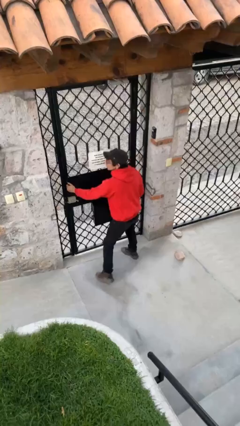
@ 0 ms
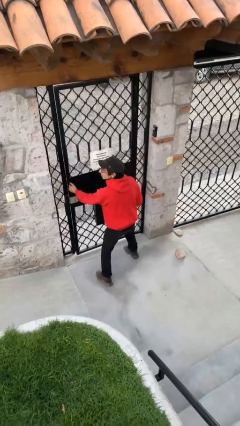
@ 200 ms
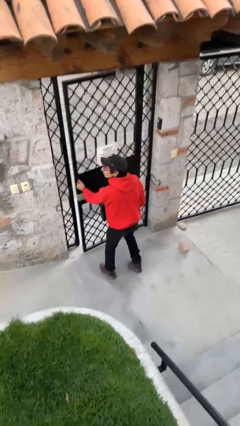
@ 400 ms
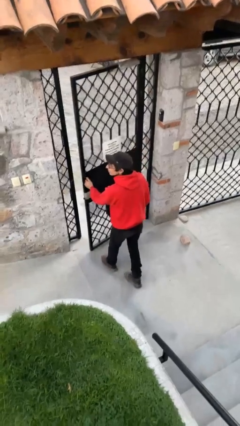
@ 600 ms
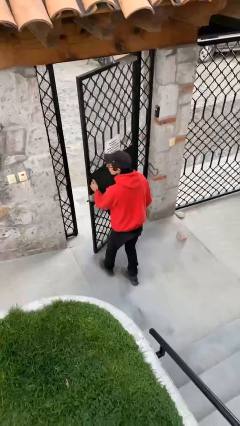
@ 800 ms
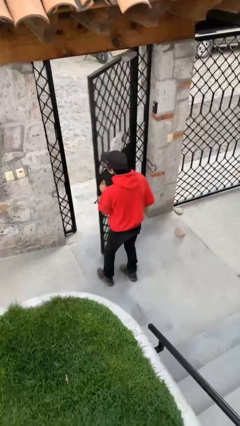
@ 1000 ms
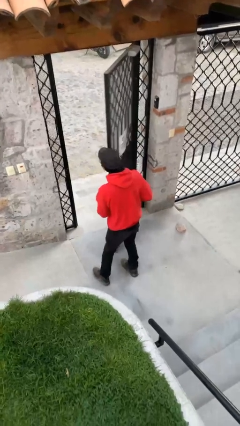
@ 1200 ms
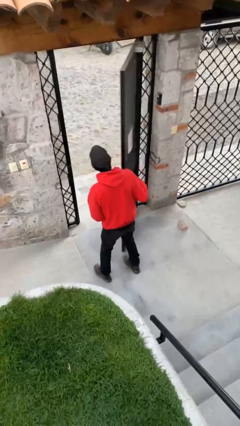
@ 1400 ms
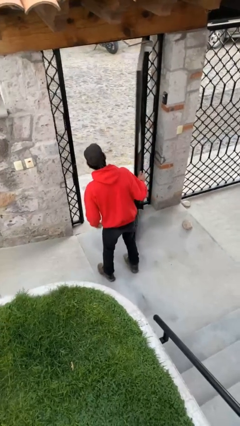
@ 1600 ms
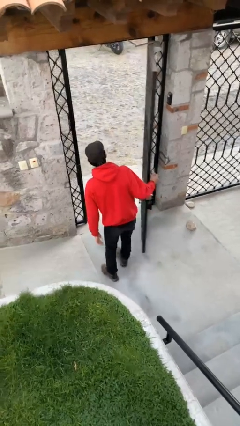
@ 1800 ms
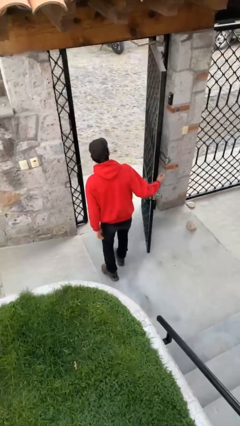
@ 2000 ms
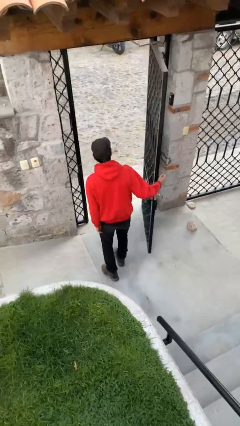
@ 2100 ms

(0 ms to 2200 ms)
person opens facility door

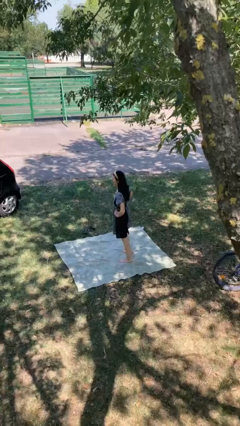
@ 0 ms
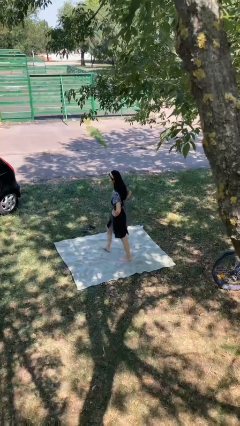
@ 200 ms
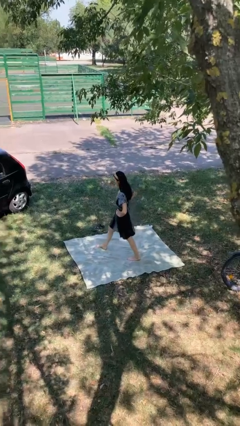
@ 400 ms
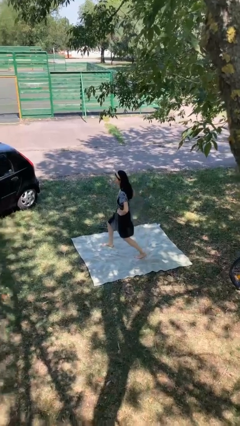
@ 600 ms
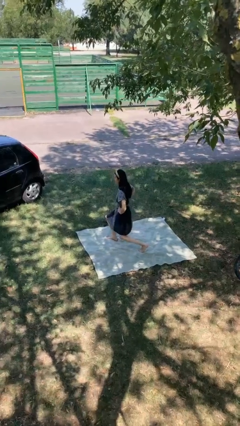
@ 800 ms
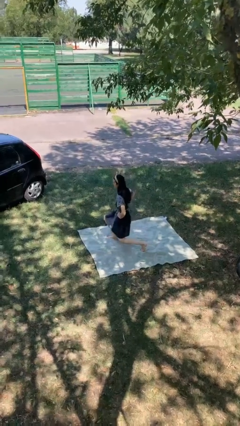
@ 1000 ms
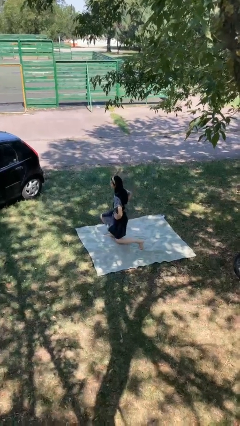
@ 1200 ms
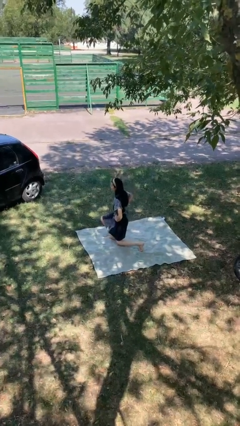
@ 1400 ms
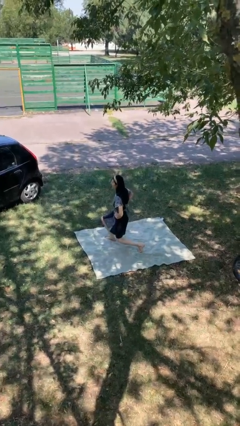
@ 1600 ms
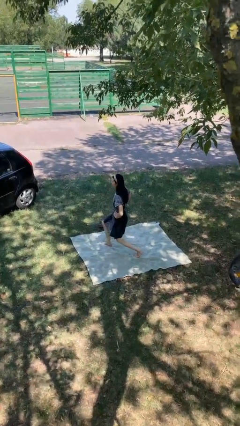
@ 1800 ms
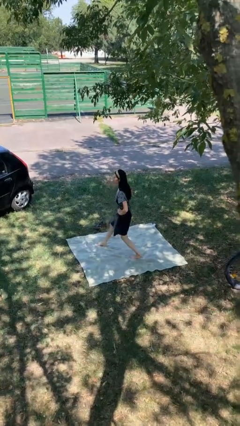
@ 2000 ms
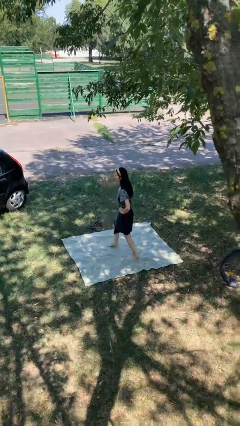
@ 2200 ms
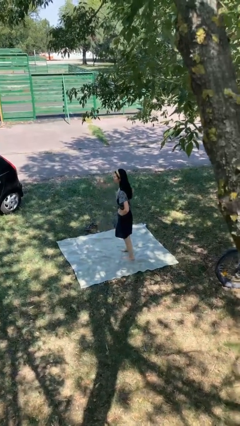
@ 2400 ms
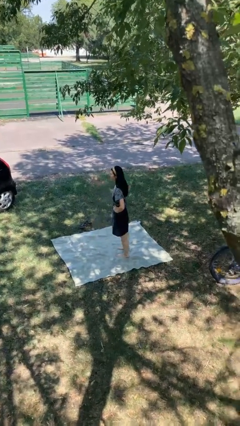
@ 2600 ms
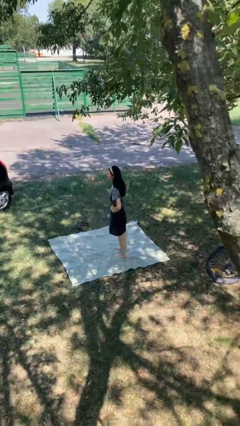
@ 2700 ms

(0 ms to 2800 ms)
person exercises with lunges

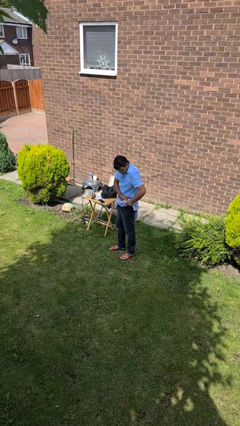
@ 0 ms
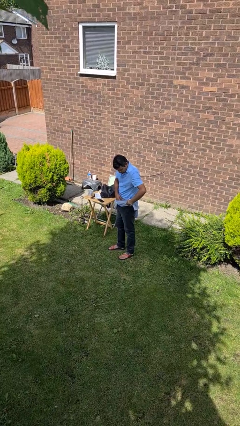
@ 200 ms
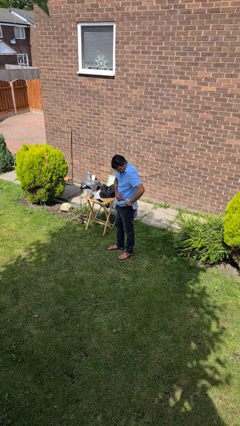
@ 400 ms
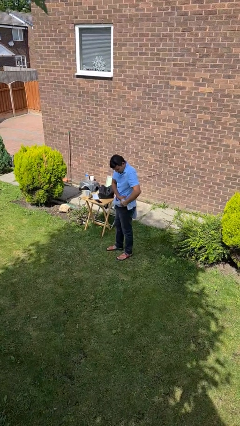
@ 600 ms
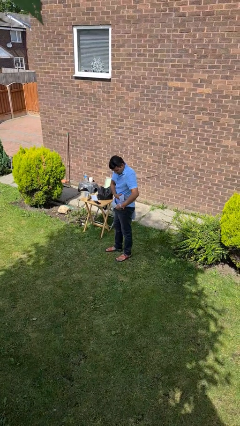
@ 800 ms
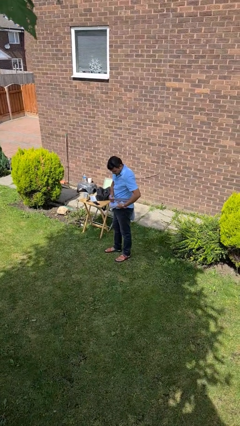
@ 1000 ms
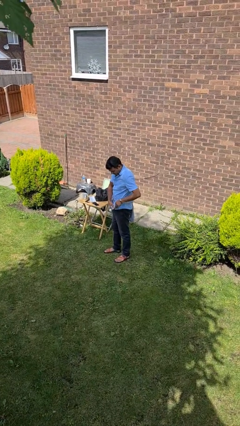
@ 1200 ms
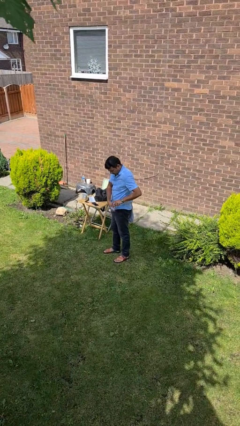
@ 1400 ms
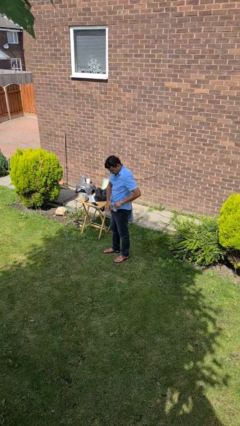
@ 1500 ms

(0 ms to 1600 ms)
person ties jacket around waist

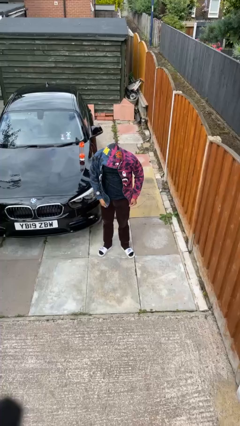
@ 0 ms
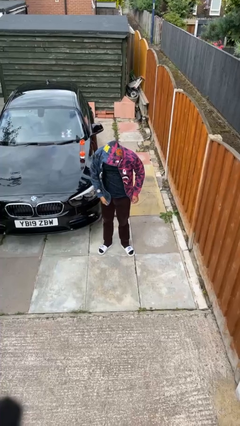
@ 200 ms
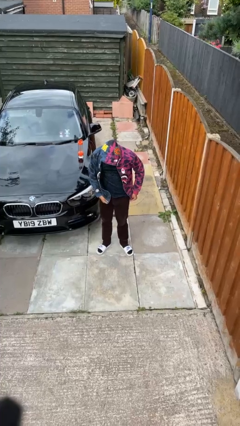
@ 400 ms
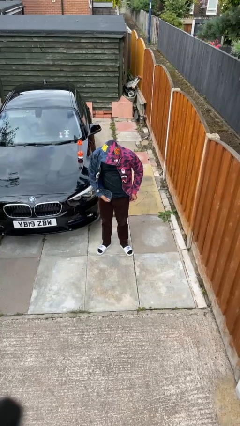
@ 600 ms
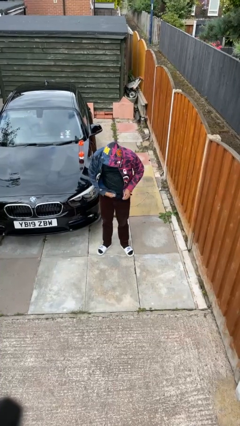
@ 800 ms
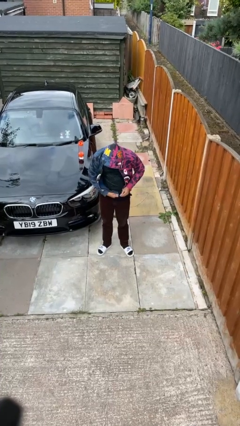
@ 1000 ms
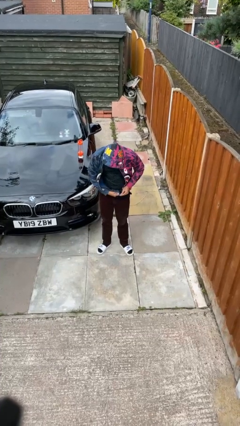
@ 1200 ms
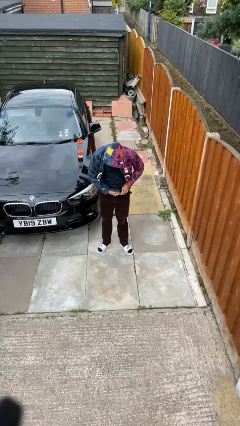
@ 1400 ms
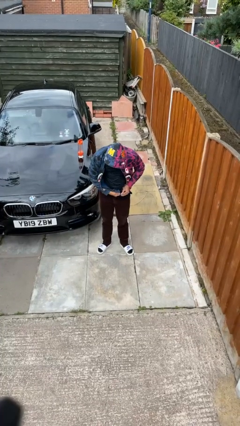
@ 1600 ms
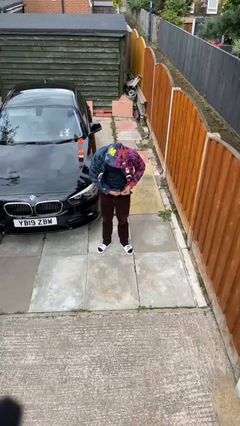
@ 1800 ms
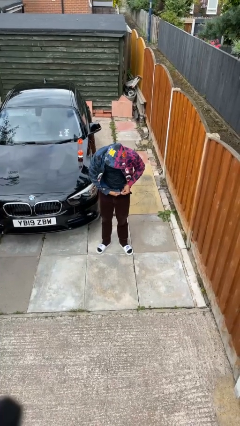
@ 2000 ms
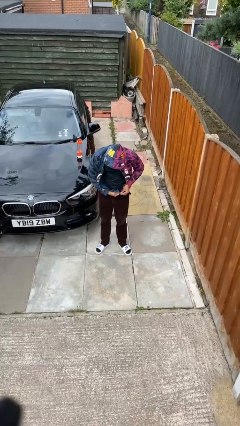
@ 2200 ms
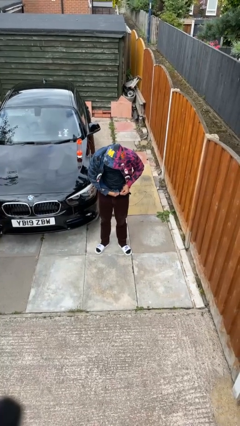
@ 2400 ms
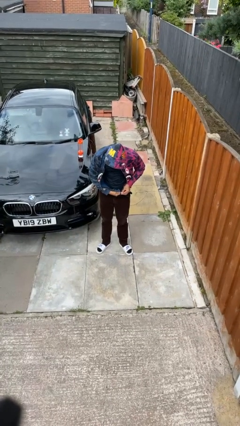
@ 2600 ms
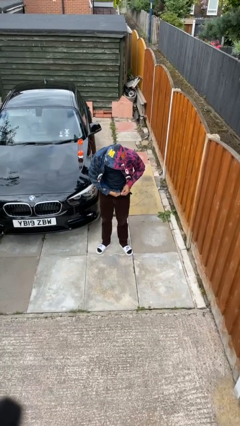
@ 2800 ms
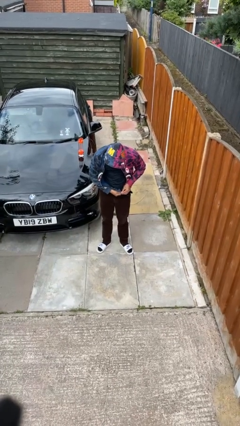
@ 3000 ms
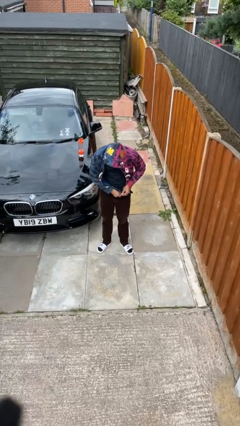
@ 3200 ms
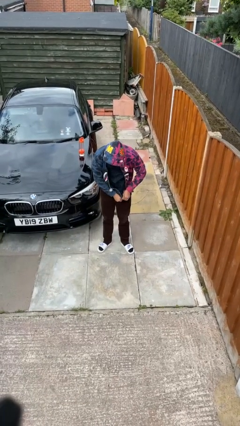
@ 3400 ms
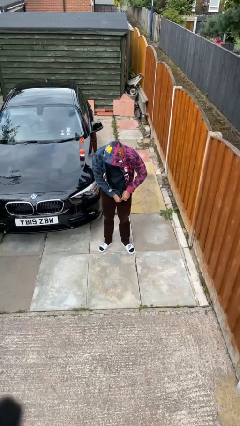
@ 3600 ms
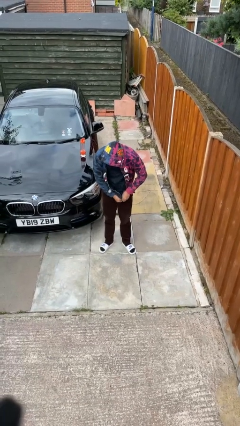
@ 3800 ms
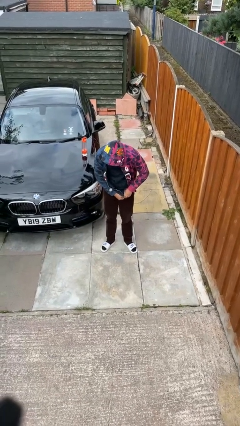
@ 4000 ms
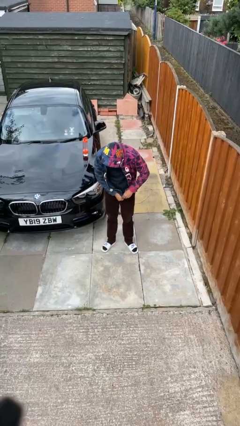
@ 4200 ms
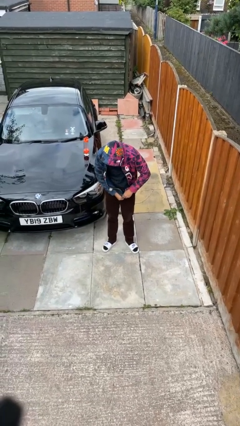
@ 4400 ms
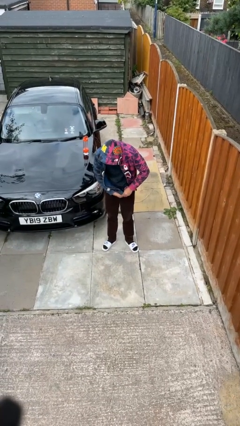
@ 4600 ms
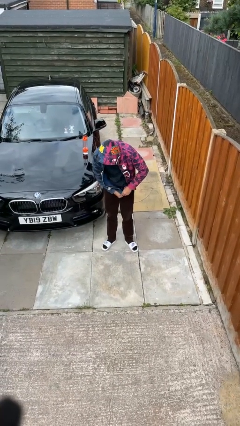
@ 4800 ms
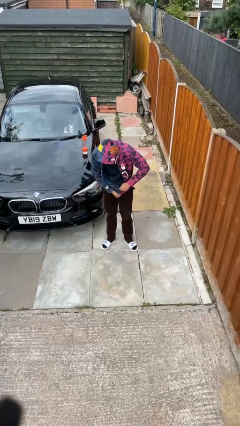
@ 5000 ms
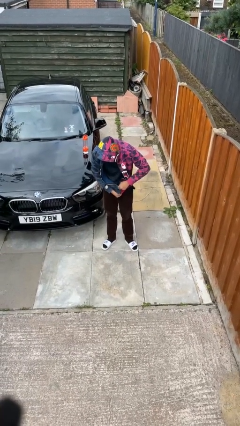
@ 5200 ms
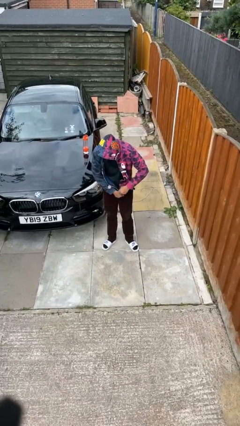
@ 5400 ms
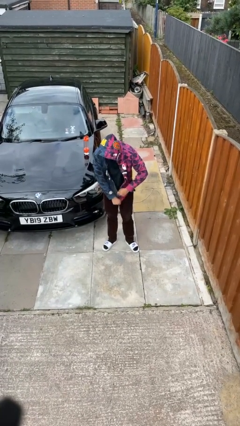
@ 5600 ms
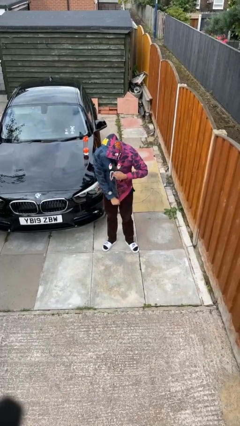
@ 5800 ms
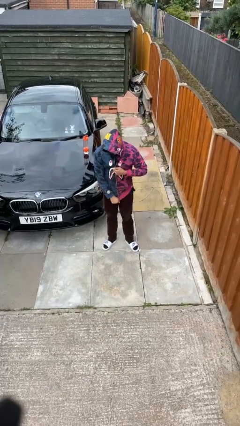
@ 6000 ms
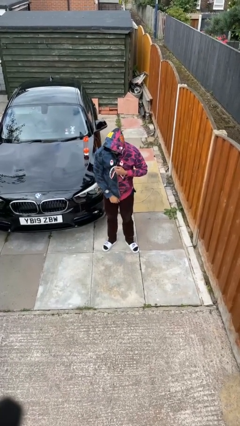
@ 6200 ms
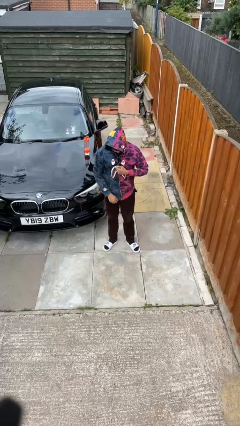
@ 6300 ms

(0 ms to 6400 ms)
person zips up jacket

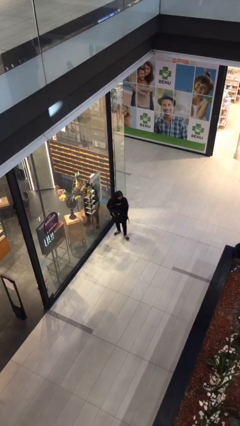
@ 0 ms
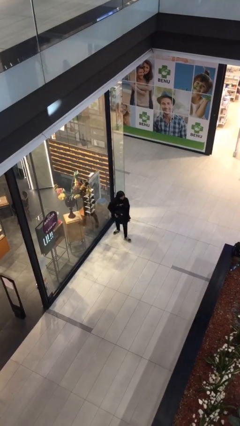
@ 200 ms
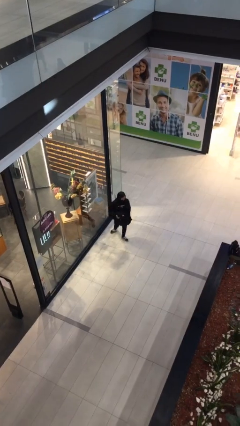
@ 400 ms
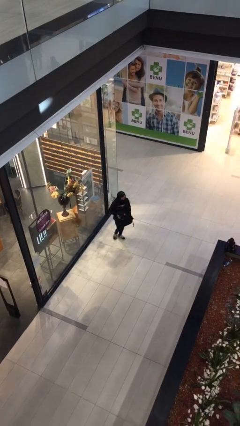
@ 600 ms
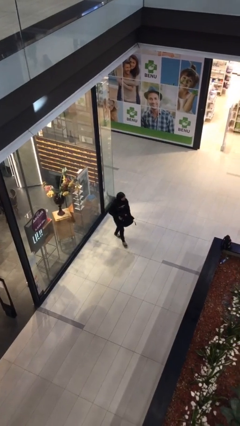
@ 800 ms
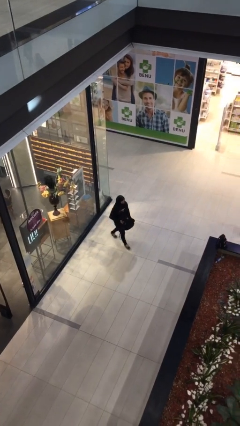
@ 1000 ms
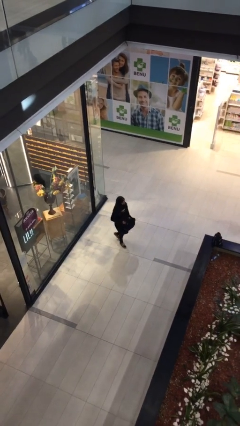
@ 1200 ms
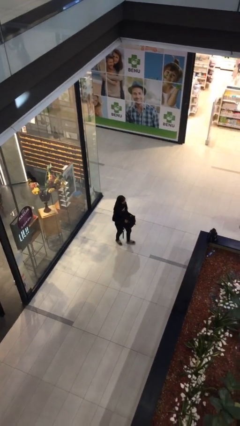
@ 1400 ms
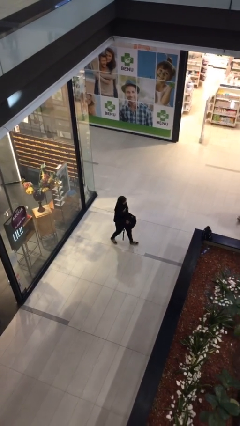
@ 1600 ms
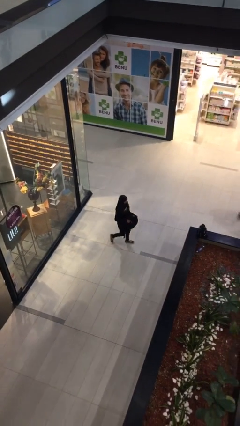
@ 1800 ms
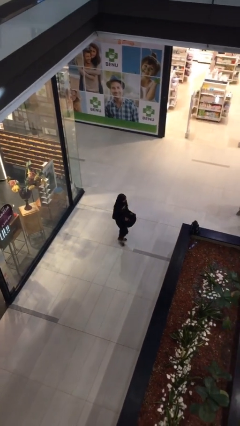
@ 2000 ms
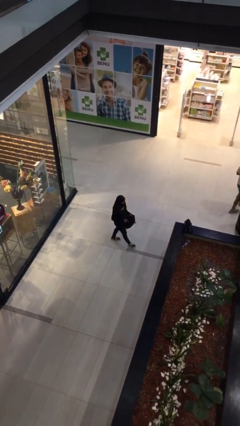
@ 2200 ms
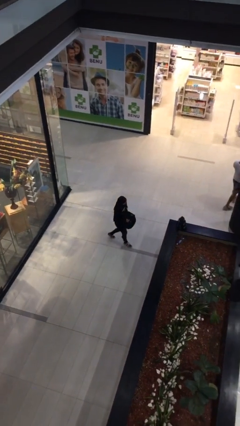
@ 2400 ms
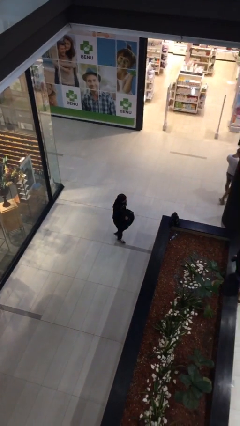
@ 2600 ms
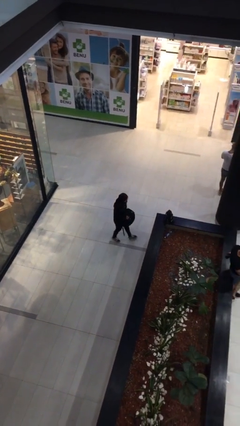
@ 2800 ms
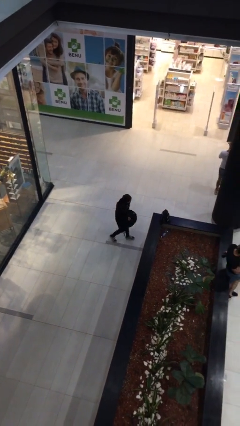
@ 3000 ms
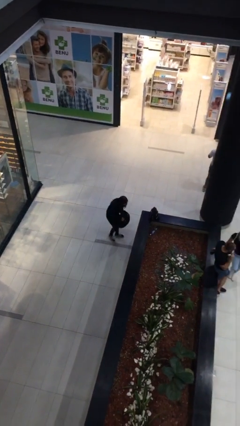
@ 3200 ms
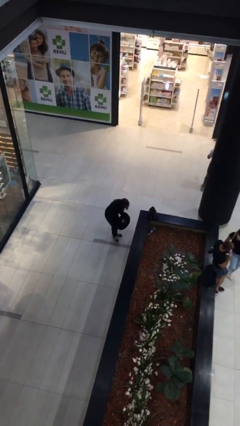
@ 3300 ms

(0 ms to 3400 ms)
person carries heavy object

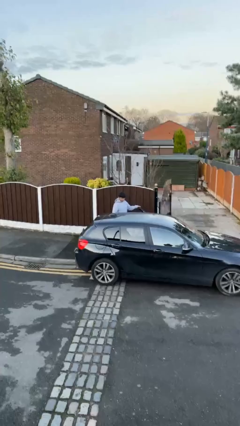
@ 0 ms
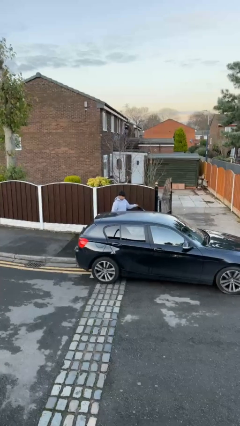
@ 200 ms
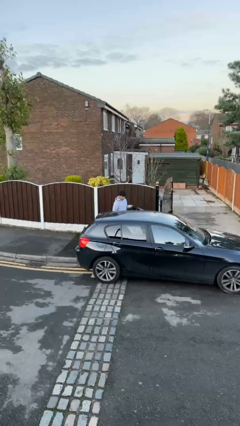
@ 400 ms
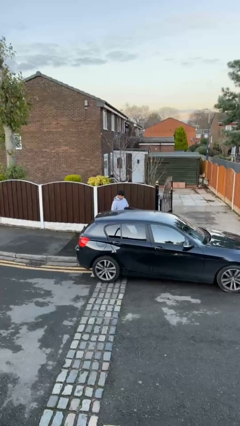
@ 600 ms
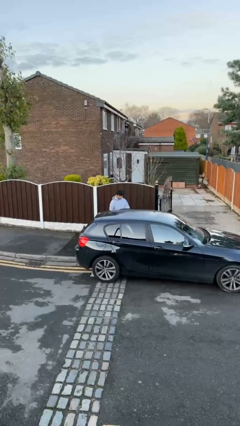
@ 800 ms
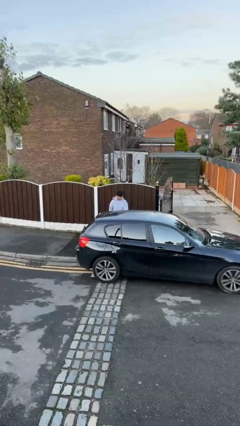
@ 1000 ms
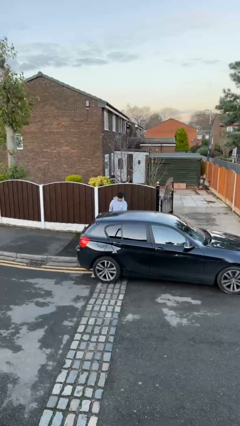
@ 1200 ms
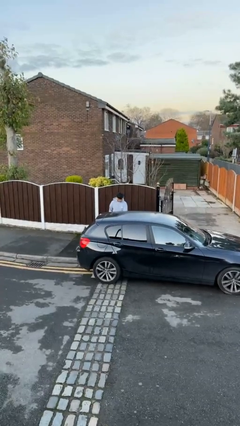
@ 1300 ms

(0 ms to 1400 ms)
person closes car door
